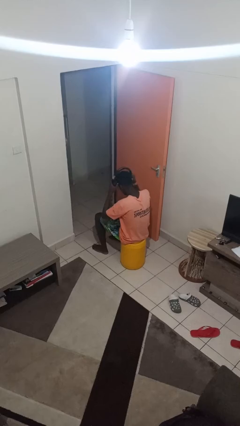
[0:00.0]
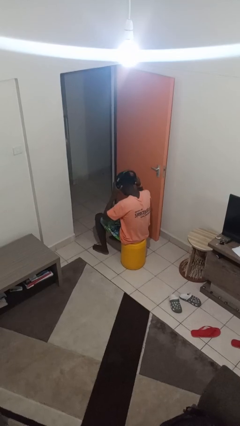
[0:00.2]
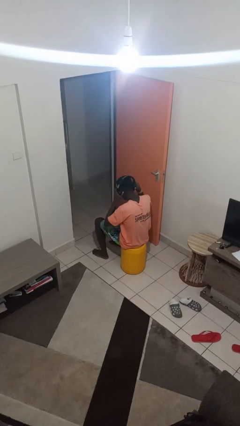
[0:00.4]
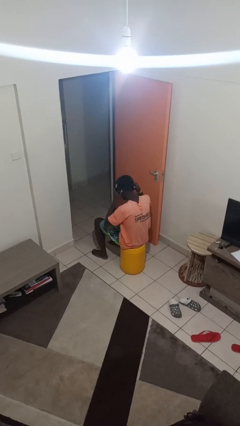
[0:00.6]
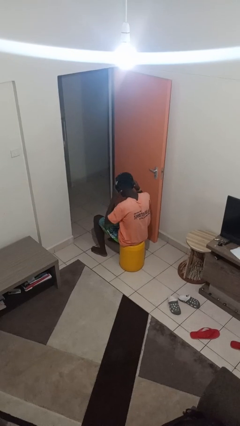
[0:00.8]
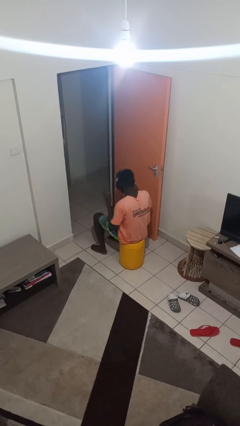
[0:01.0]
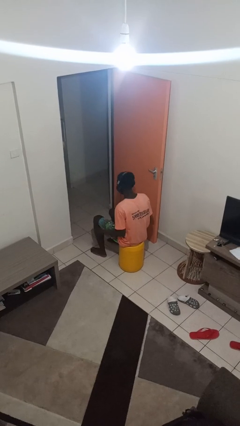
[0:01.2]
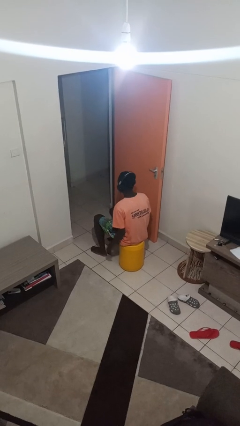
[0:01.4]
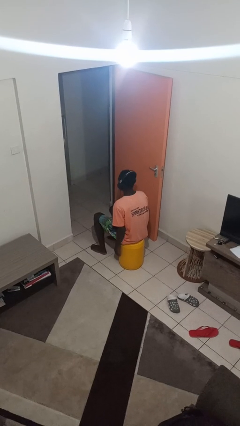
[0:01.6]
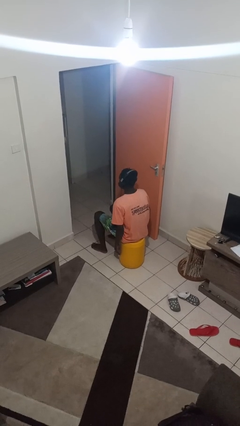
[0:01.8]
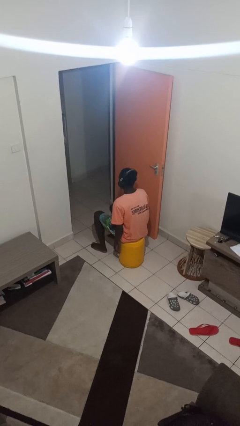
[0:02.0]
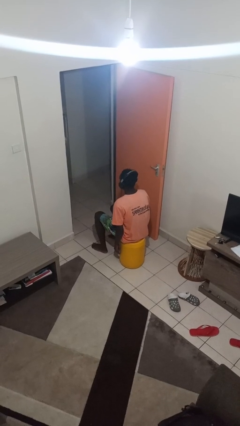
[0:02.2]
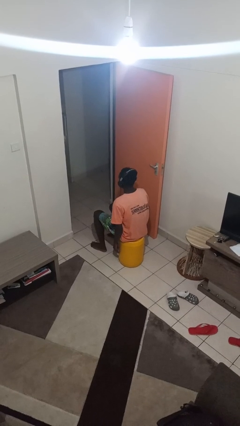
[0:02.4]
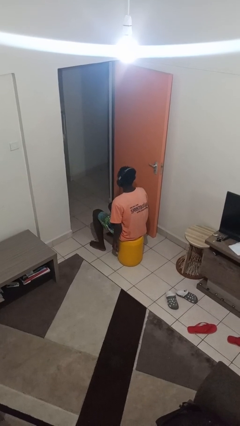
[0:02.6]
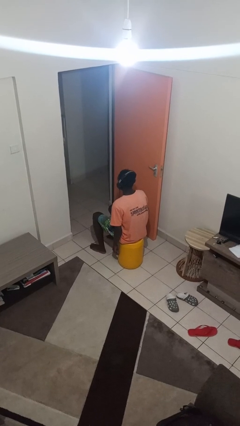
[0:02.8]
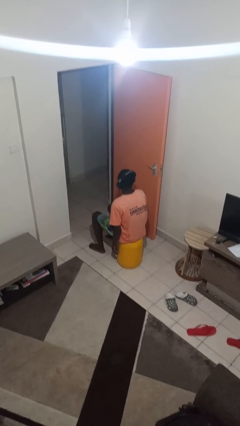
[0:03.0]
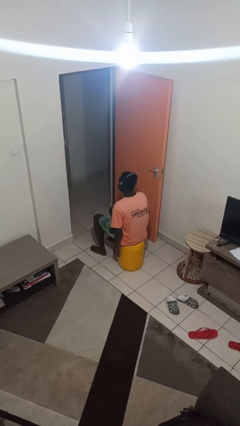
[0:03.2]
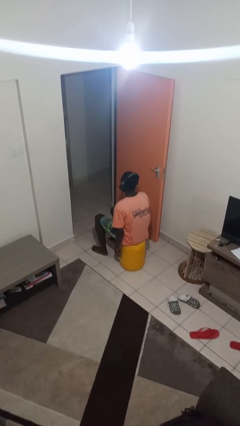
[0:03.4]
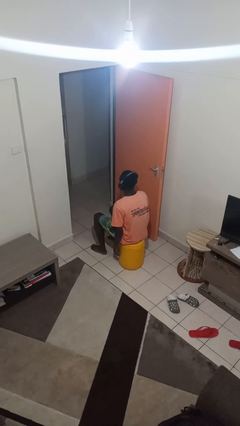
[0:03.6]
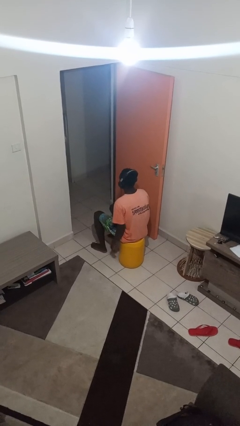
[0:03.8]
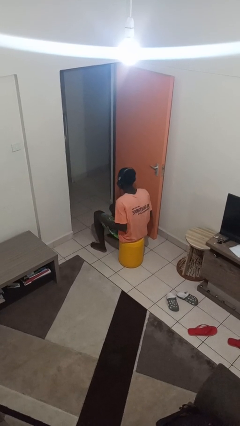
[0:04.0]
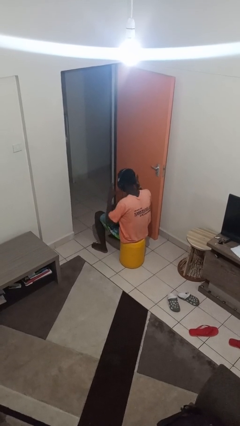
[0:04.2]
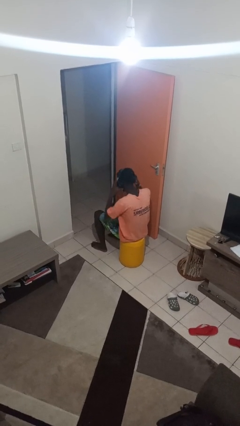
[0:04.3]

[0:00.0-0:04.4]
person puts on headphones

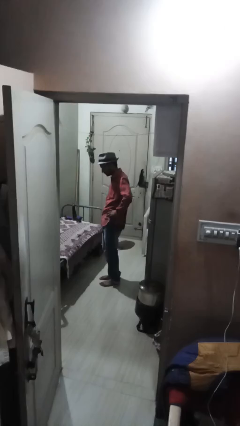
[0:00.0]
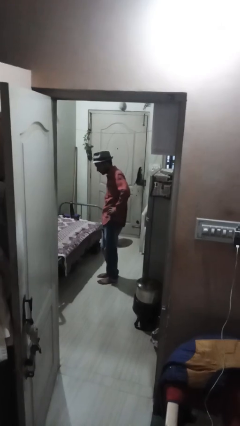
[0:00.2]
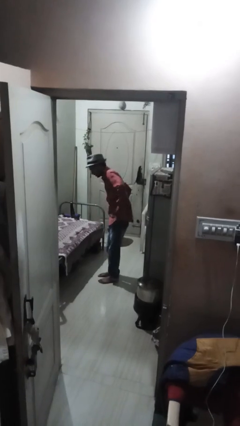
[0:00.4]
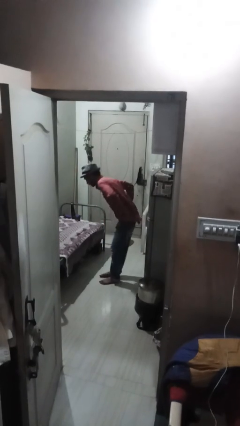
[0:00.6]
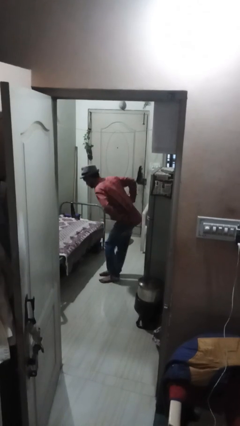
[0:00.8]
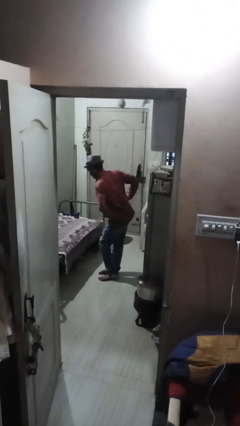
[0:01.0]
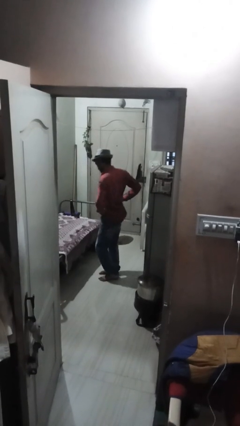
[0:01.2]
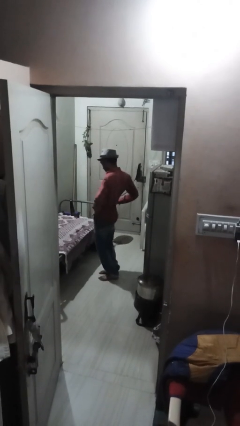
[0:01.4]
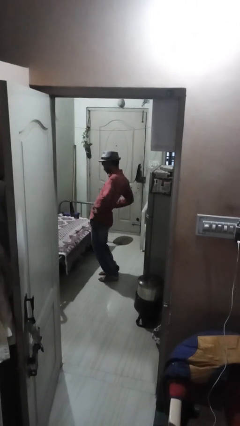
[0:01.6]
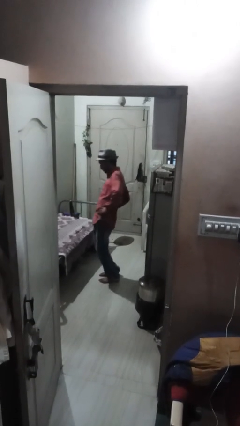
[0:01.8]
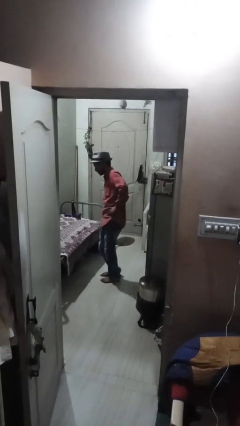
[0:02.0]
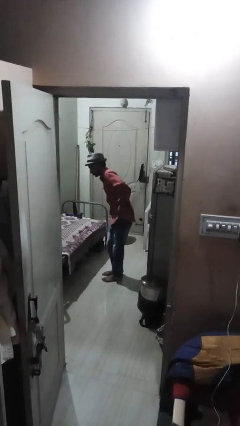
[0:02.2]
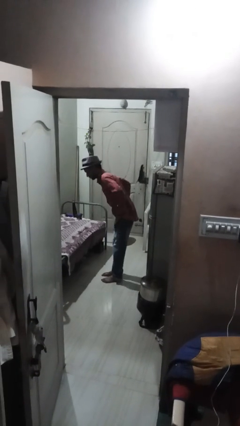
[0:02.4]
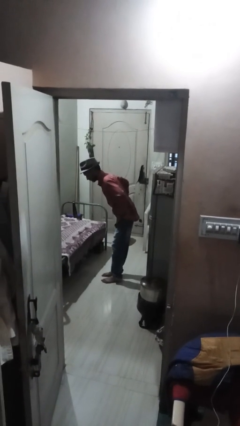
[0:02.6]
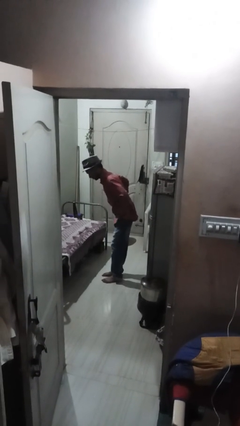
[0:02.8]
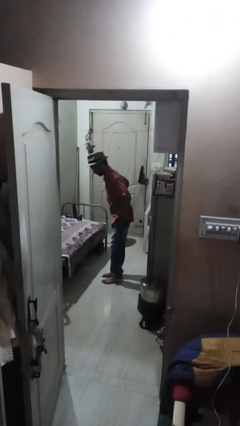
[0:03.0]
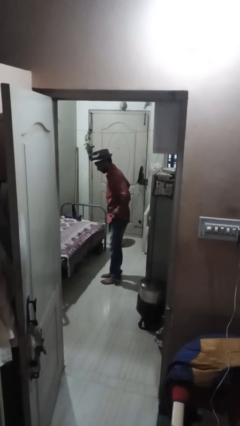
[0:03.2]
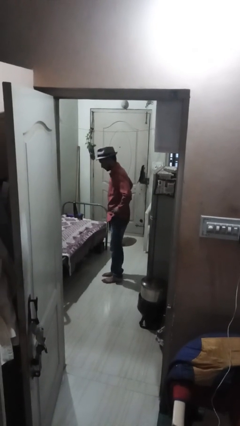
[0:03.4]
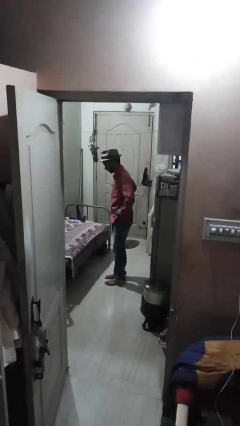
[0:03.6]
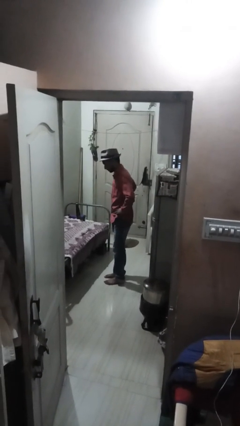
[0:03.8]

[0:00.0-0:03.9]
person wiggles hips

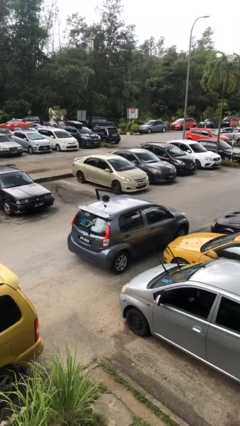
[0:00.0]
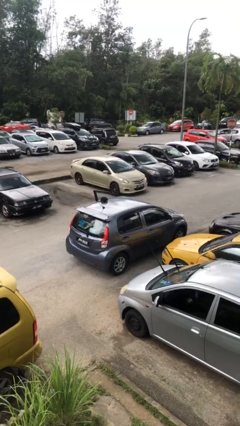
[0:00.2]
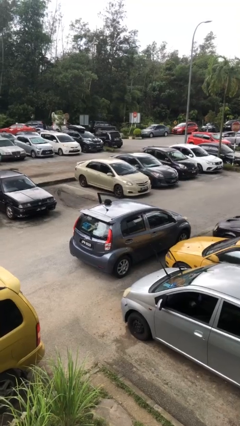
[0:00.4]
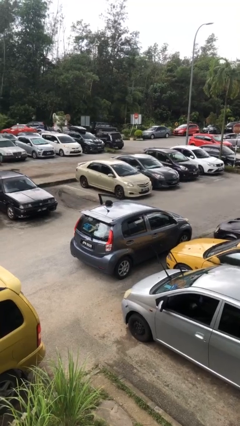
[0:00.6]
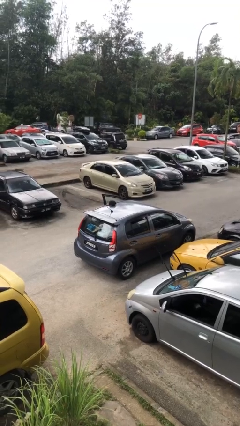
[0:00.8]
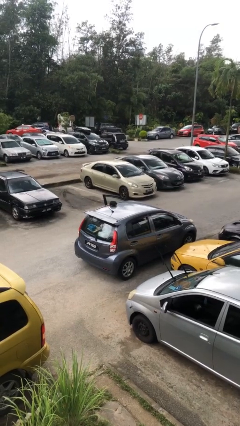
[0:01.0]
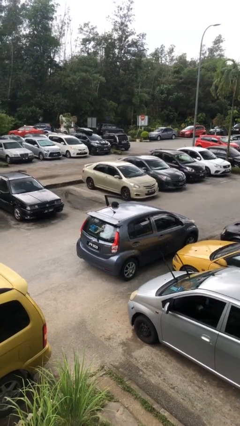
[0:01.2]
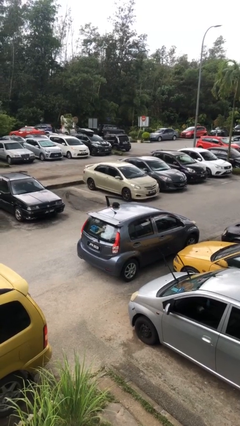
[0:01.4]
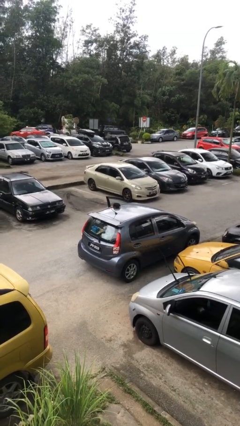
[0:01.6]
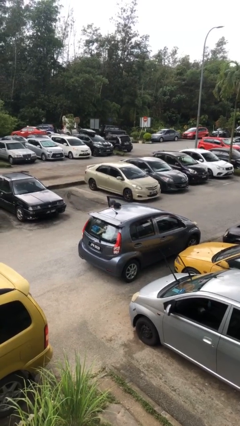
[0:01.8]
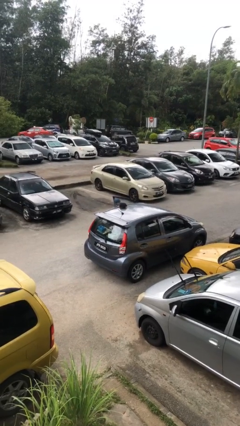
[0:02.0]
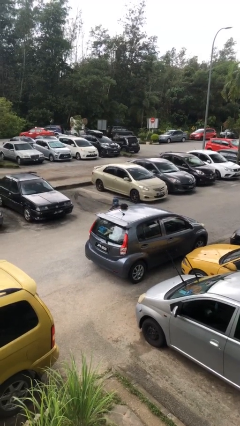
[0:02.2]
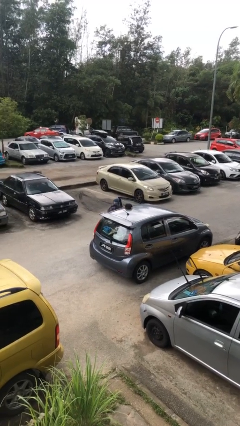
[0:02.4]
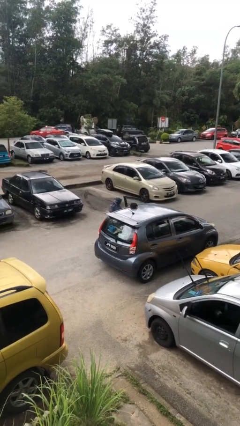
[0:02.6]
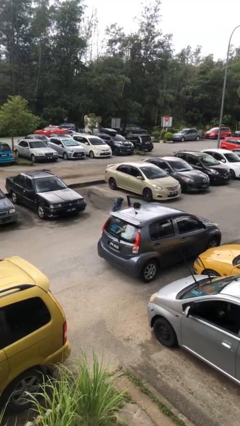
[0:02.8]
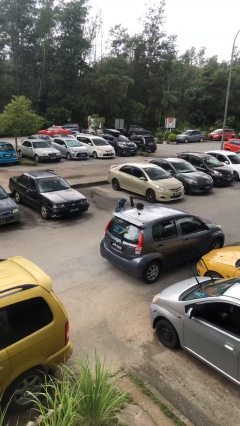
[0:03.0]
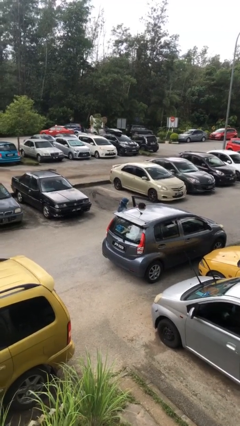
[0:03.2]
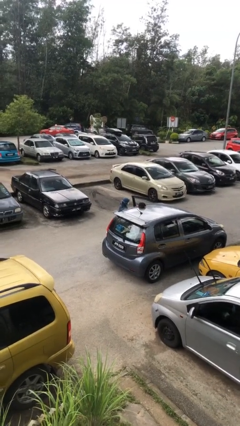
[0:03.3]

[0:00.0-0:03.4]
person exits car

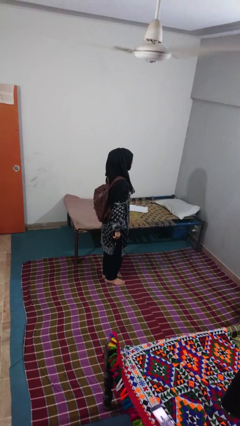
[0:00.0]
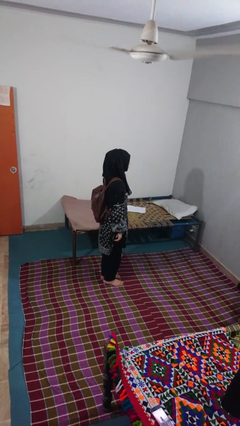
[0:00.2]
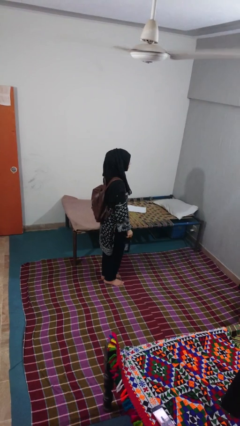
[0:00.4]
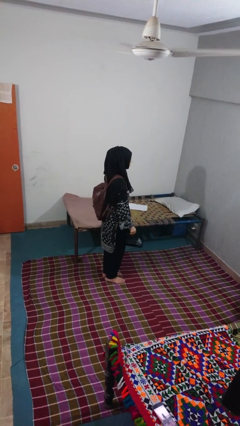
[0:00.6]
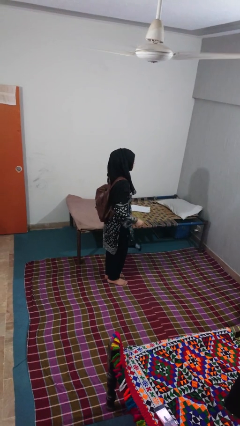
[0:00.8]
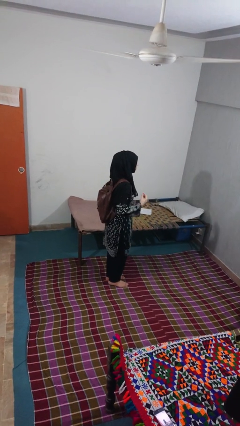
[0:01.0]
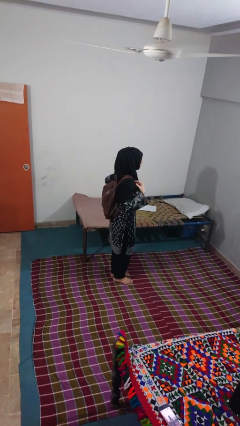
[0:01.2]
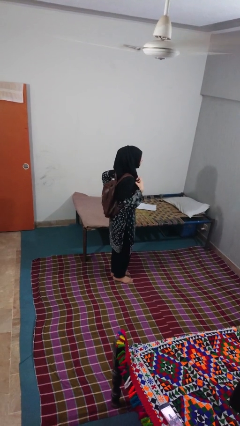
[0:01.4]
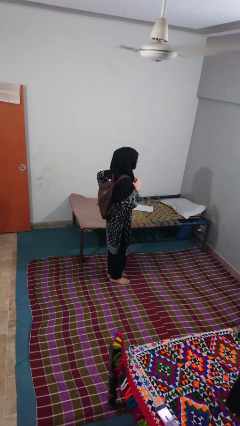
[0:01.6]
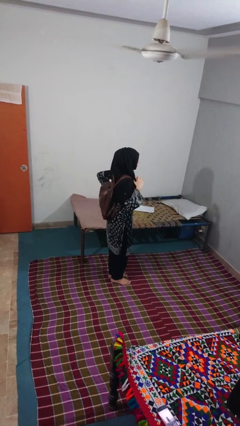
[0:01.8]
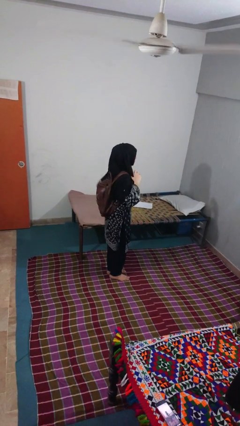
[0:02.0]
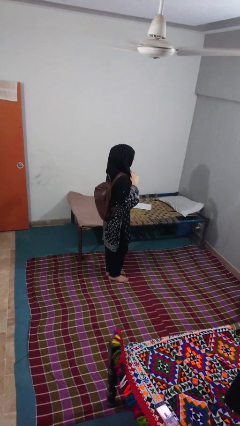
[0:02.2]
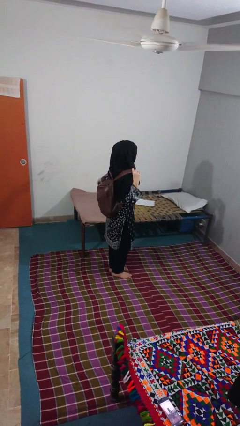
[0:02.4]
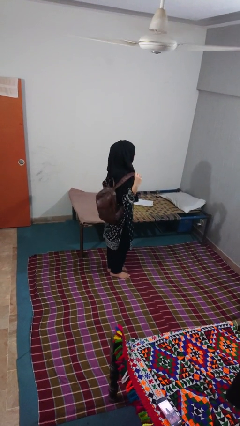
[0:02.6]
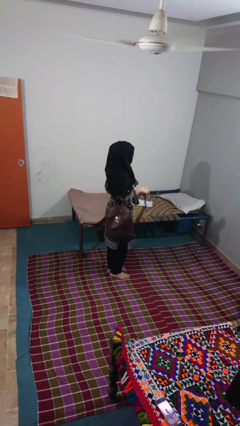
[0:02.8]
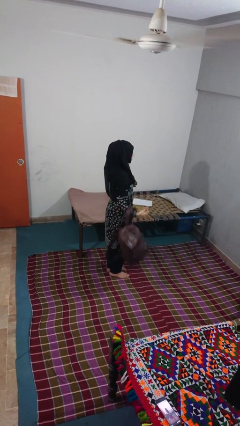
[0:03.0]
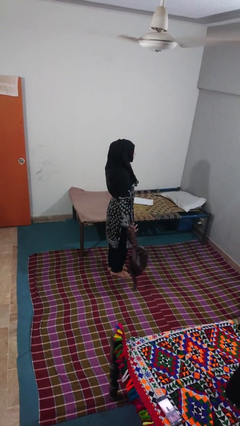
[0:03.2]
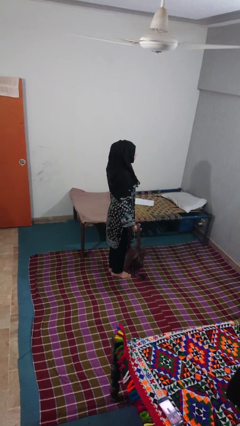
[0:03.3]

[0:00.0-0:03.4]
person takes off backpack

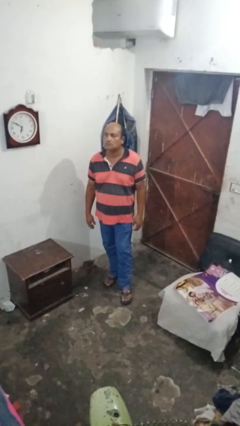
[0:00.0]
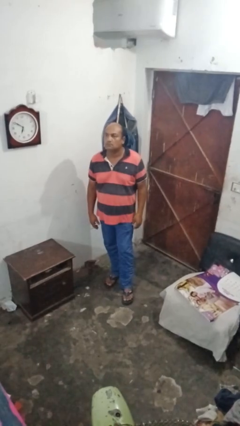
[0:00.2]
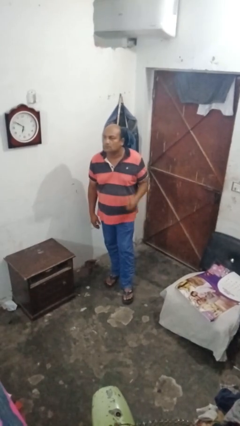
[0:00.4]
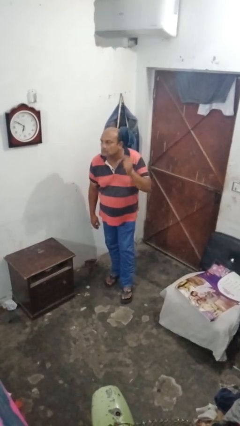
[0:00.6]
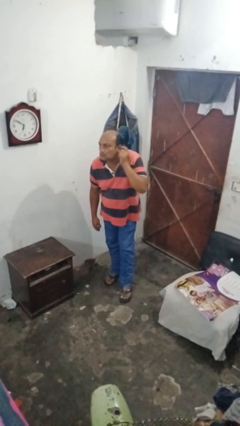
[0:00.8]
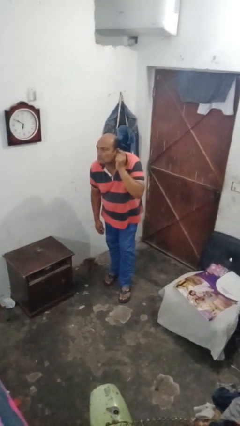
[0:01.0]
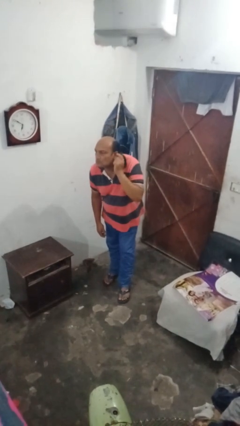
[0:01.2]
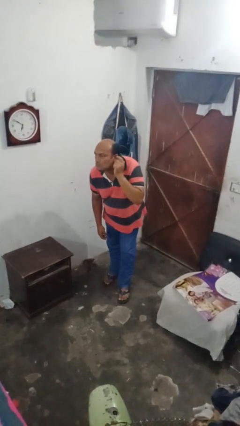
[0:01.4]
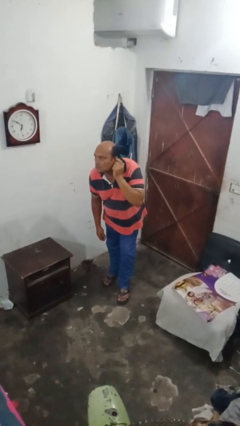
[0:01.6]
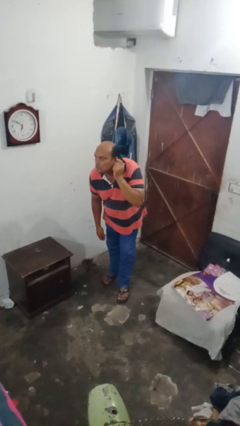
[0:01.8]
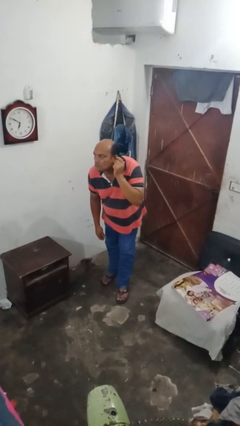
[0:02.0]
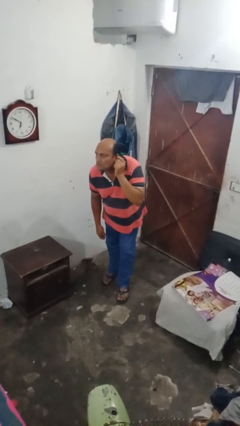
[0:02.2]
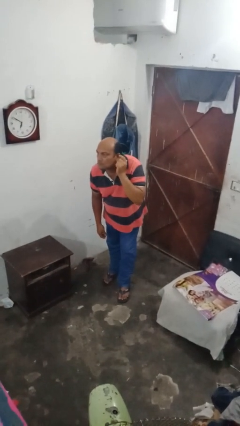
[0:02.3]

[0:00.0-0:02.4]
person gestures be quiet
